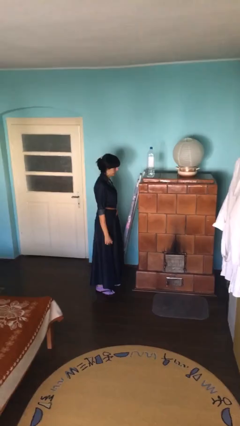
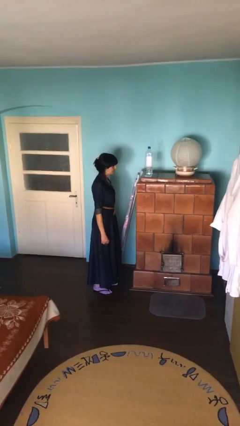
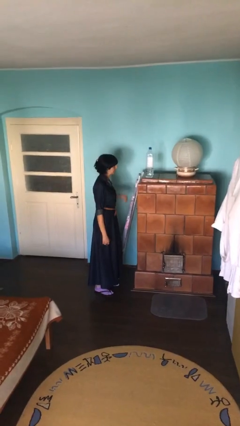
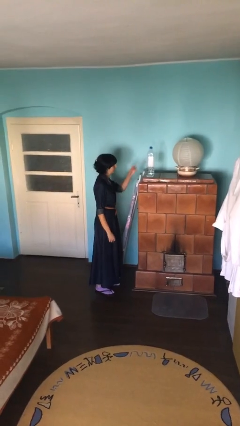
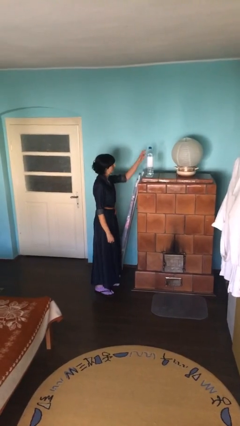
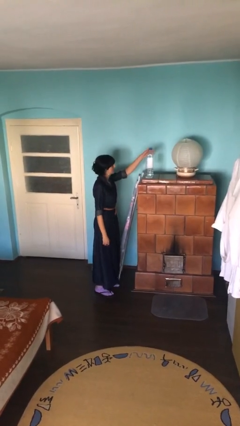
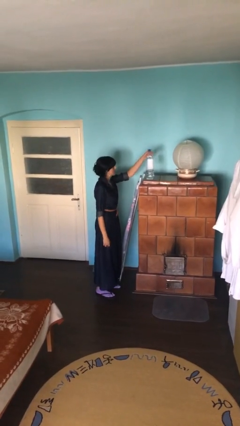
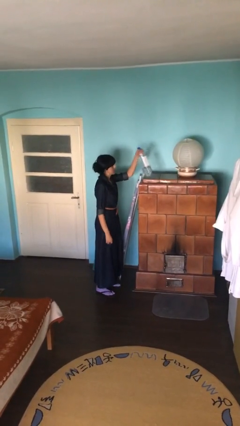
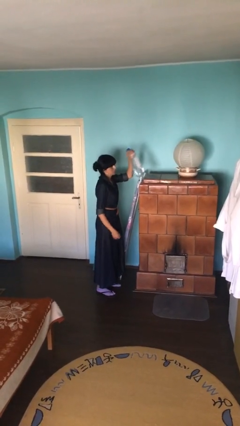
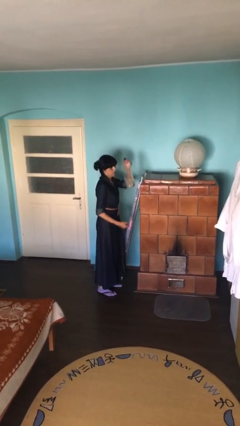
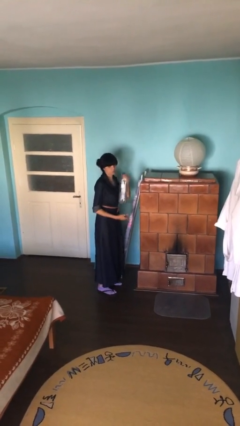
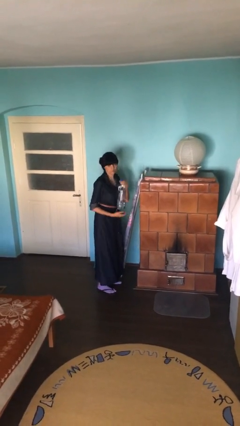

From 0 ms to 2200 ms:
person picks up object from shelf

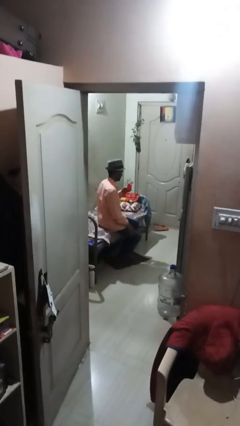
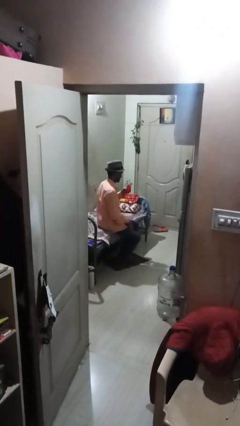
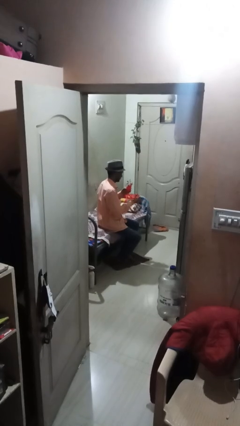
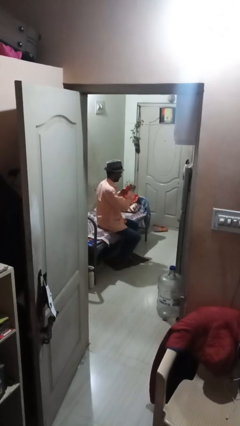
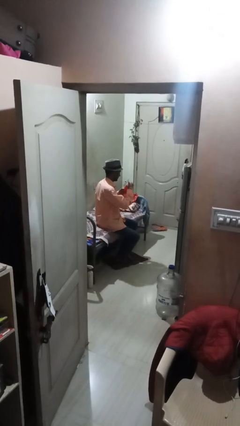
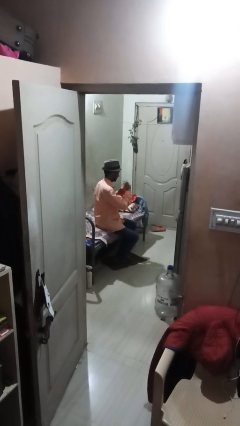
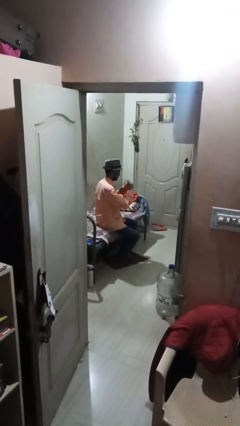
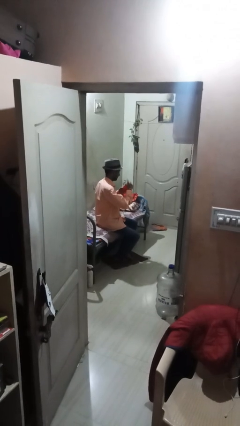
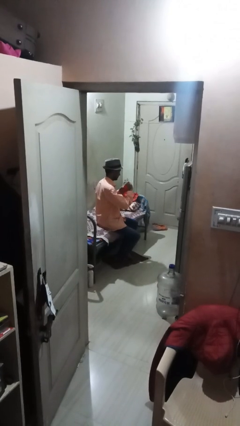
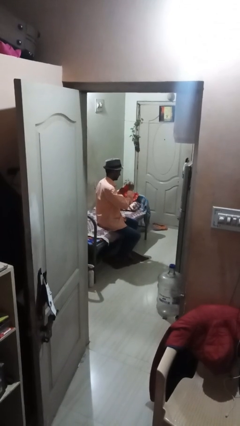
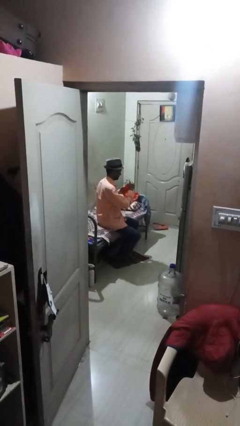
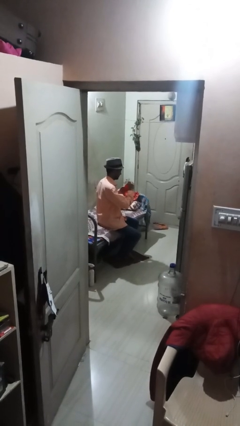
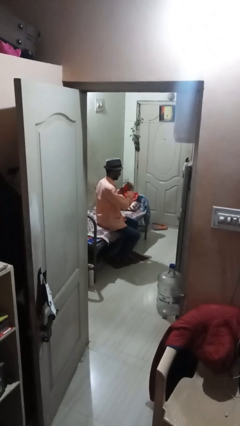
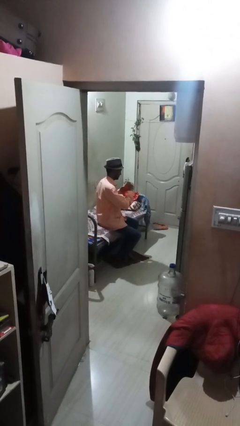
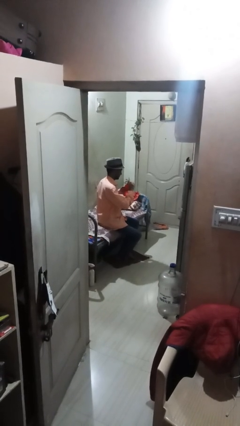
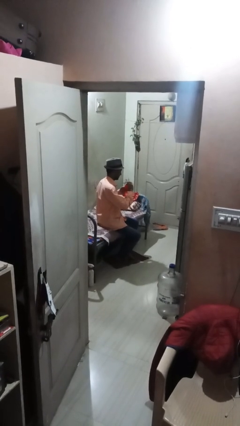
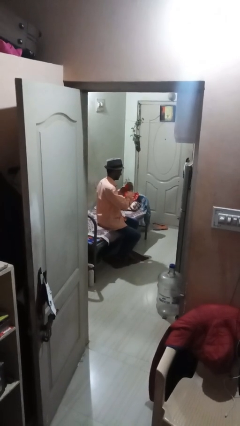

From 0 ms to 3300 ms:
person arranges flowers in vase

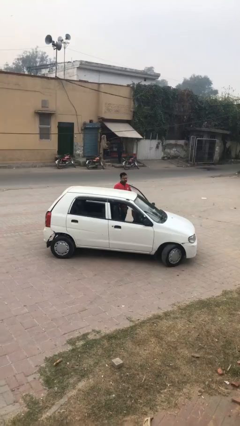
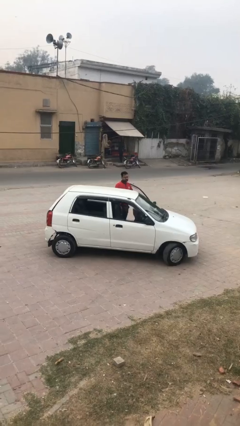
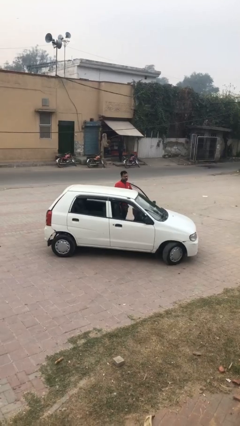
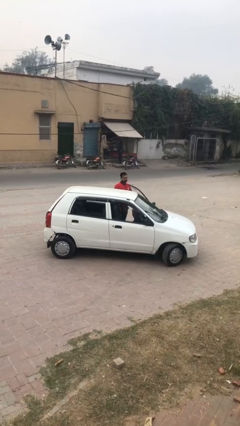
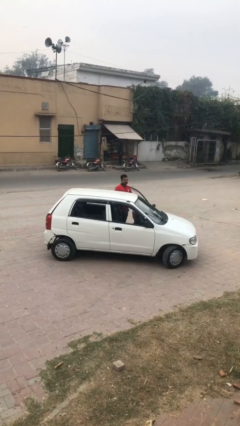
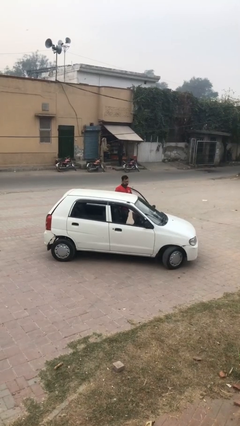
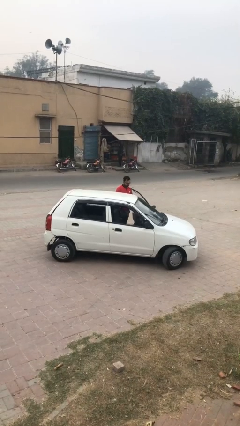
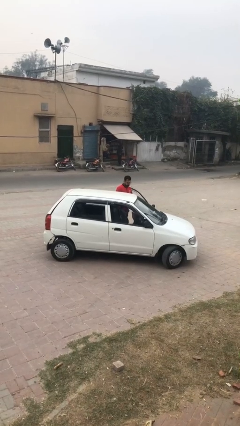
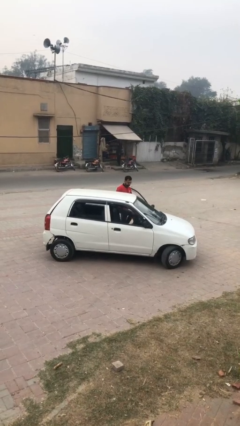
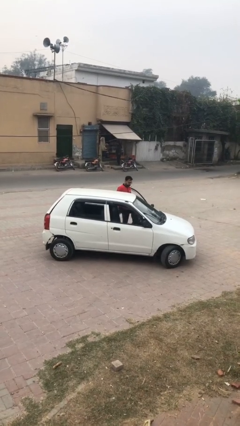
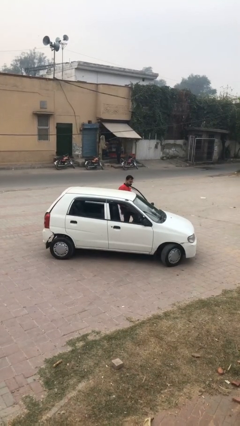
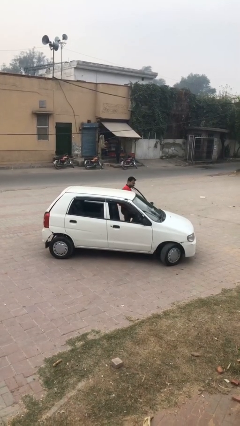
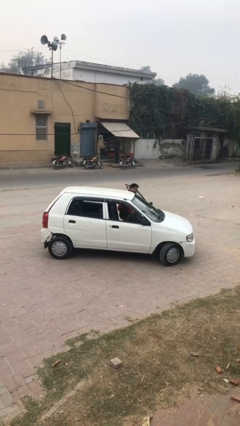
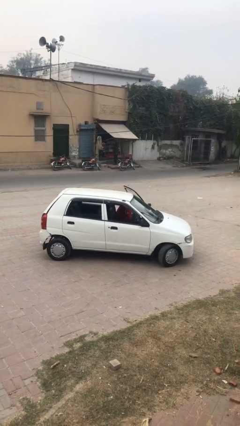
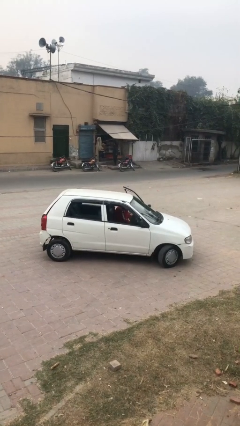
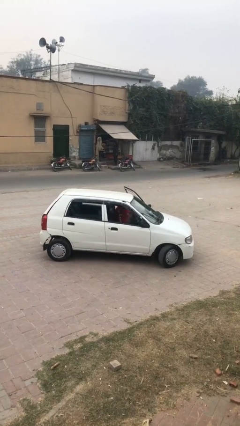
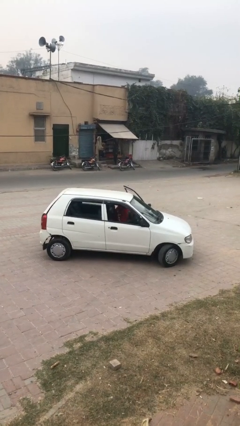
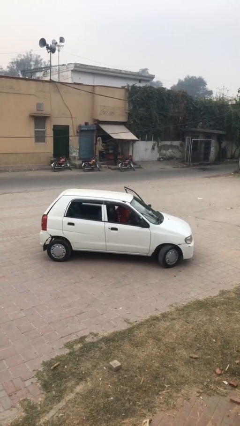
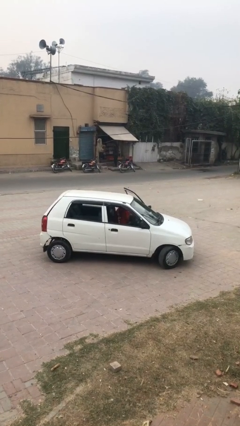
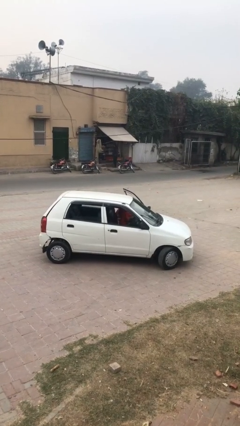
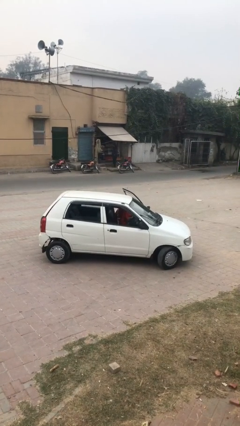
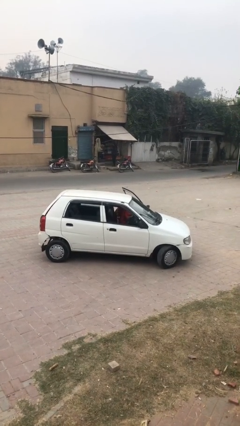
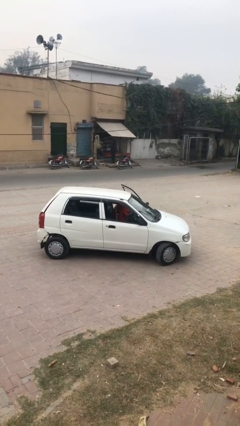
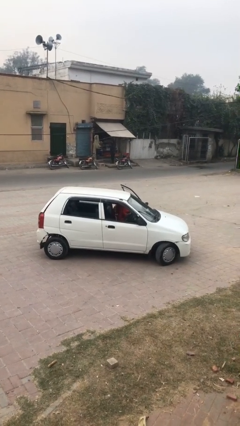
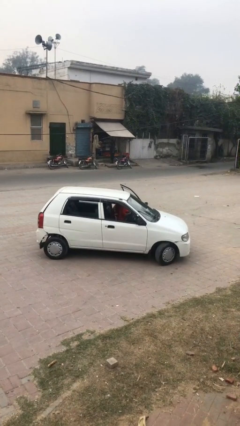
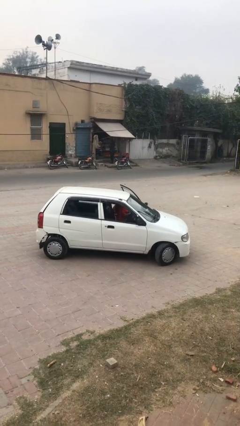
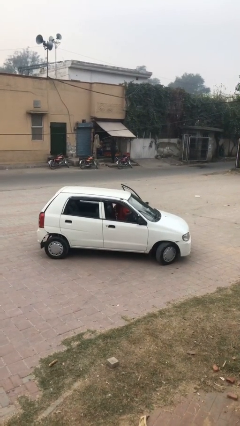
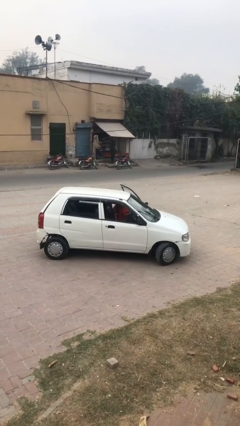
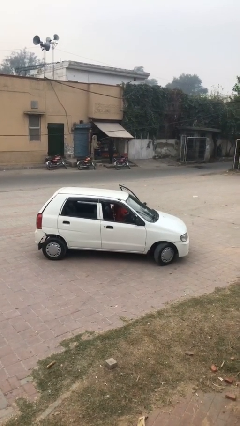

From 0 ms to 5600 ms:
person enters car

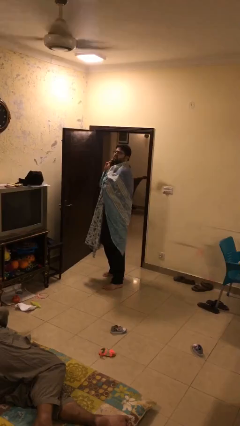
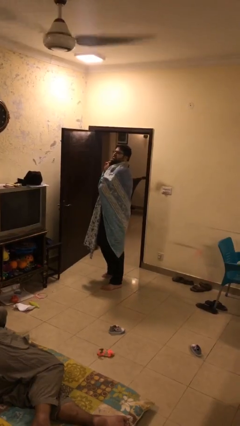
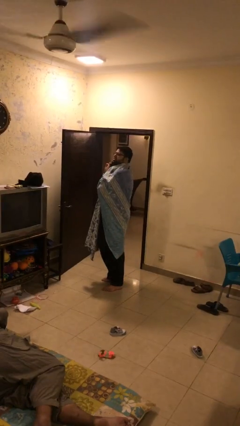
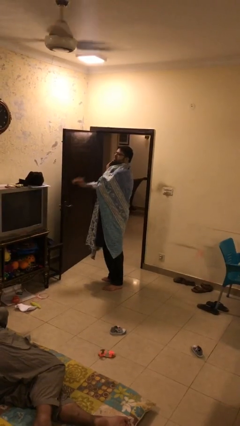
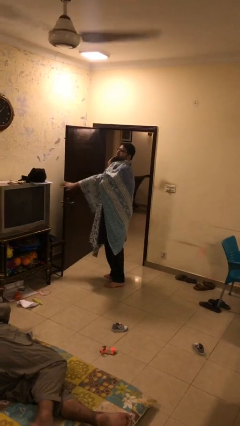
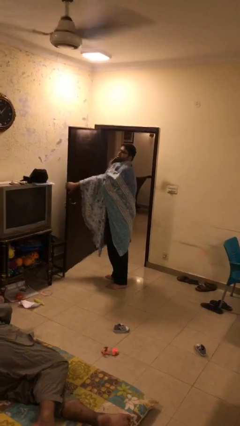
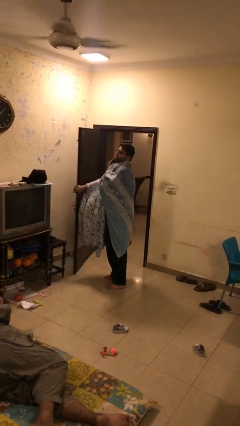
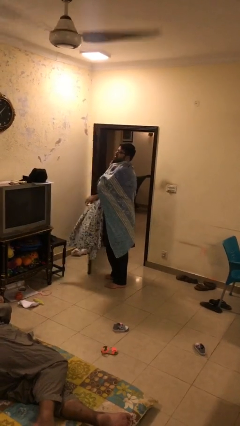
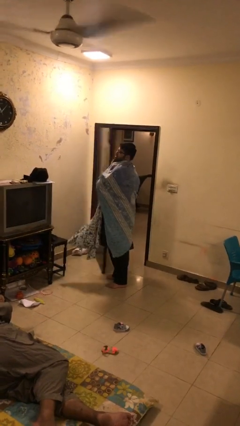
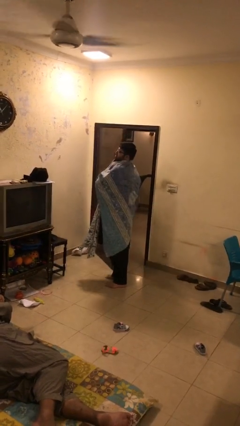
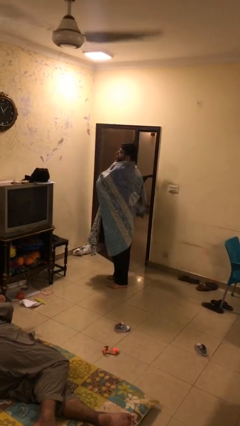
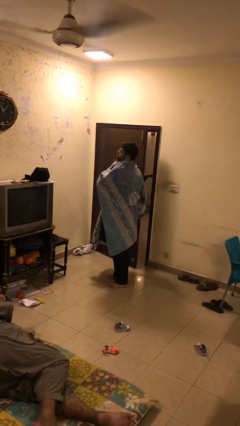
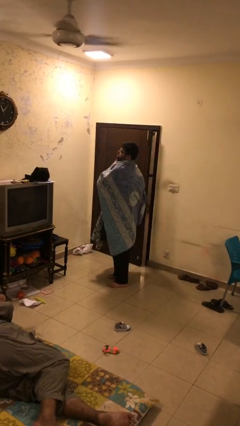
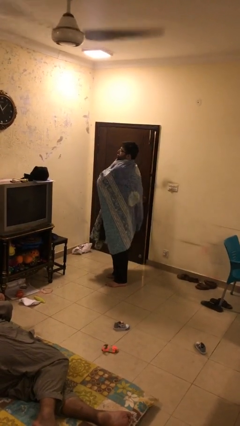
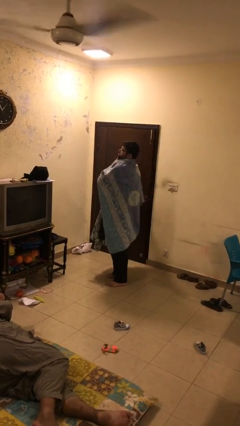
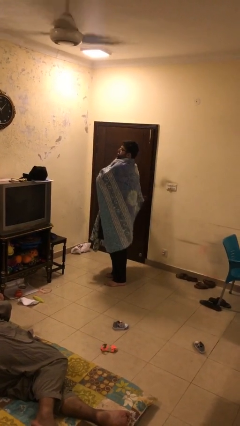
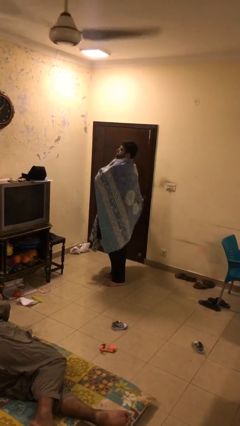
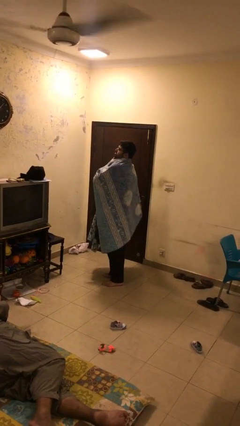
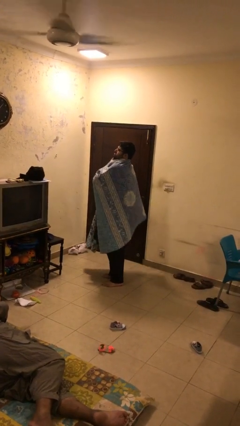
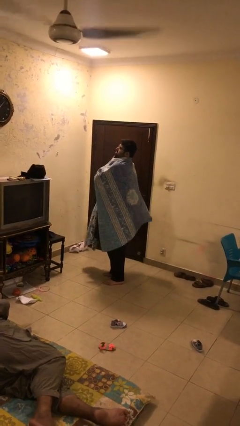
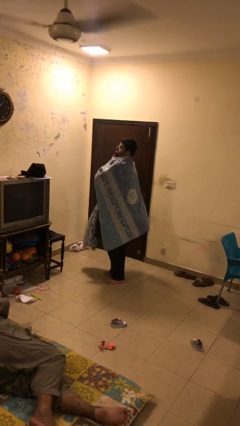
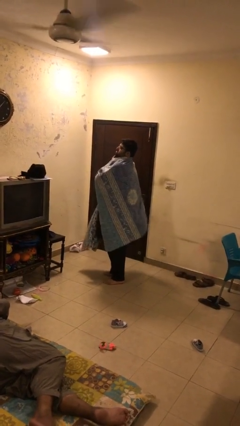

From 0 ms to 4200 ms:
person closes facility door

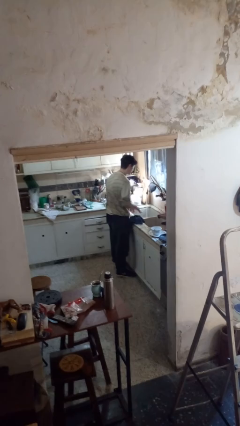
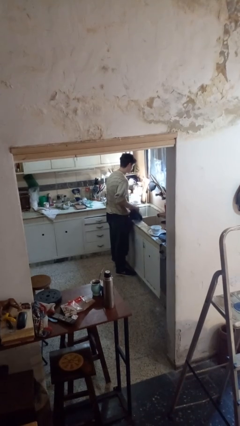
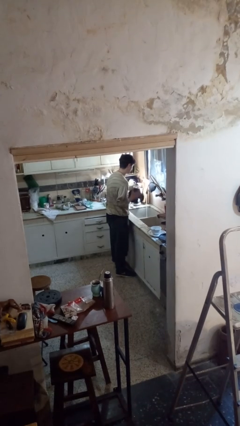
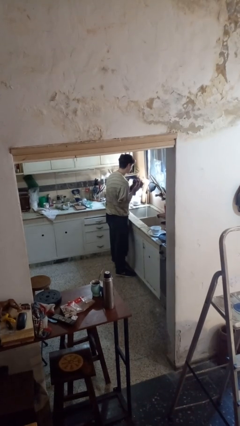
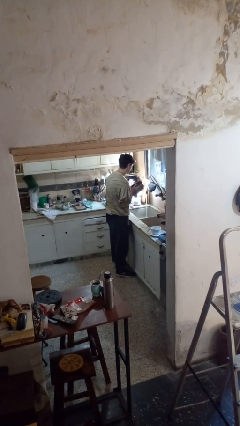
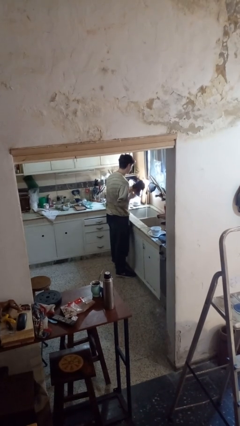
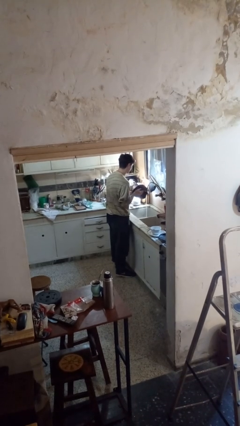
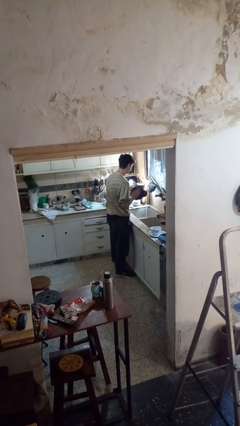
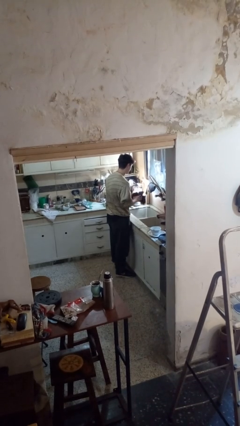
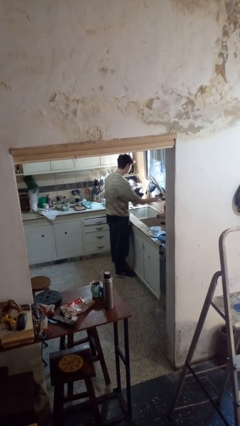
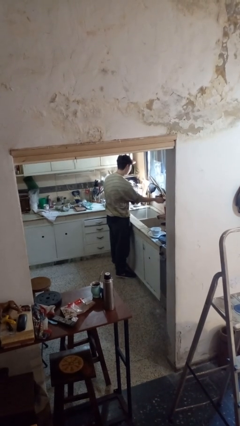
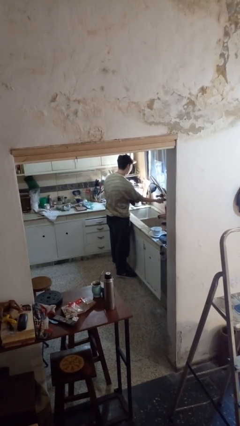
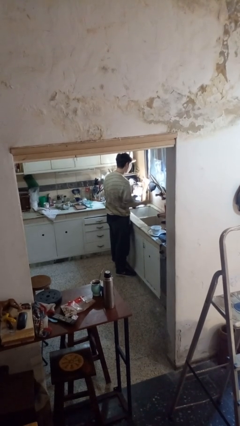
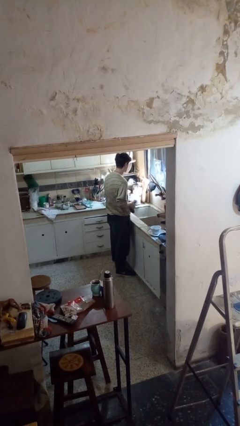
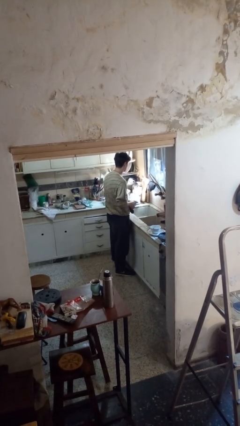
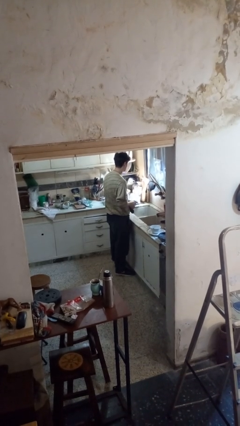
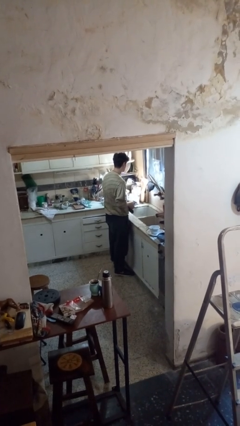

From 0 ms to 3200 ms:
person dries hands with towel
